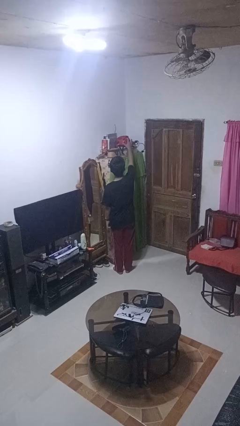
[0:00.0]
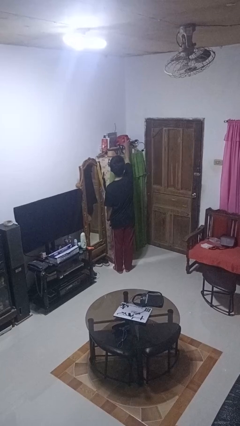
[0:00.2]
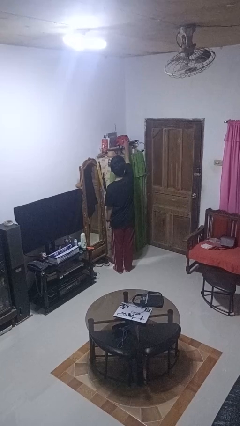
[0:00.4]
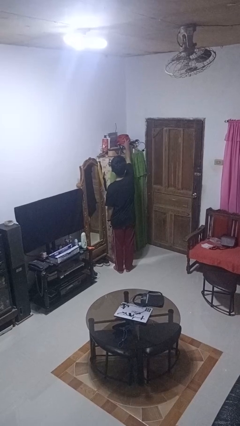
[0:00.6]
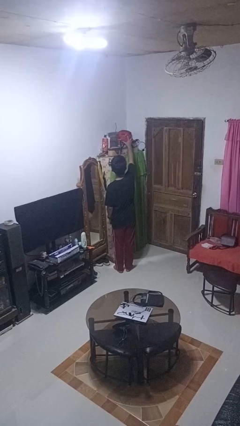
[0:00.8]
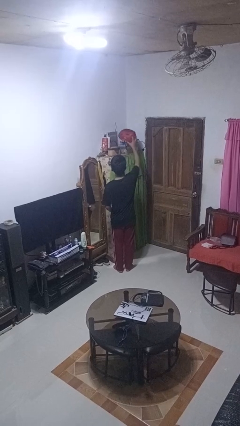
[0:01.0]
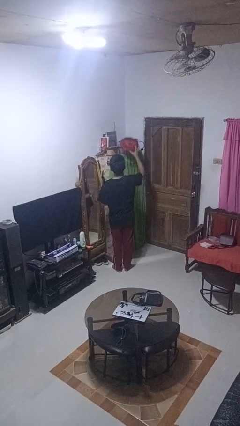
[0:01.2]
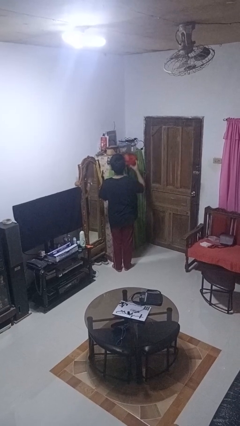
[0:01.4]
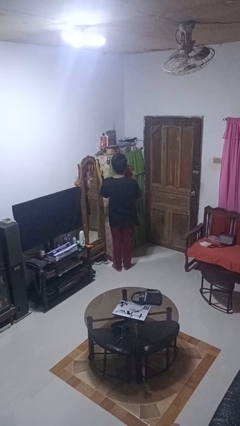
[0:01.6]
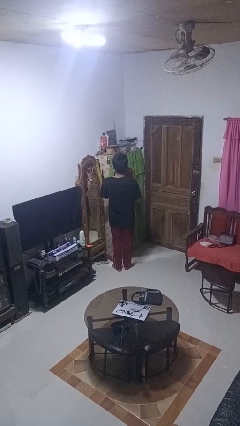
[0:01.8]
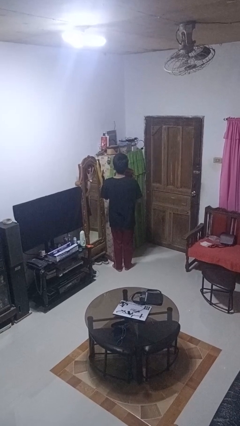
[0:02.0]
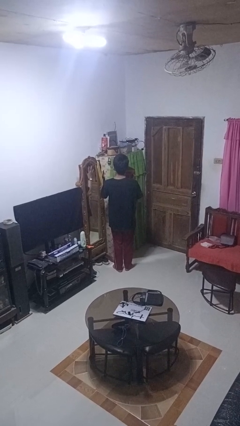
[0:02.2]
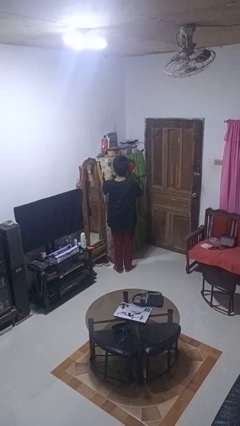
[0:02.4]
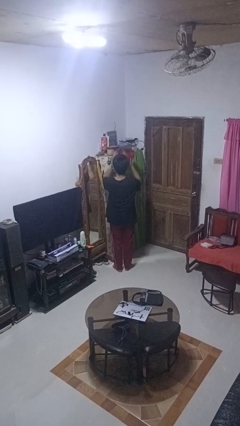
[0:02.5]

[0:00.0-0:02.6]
person picks up object from shelf

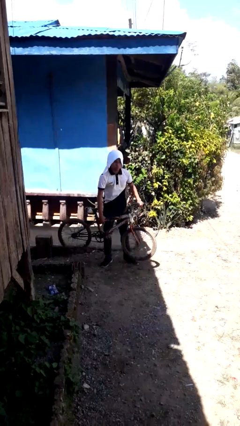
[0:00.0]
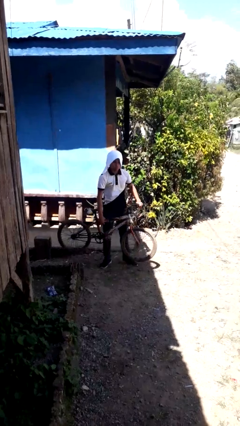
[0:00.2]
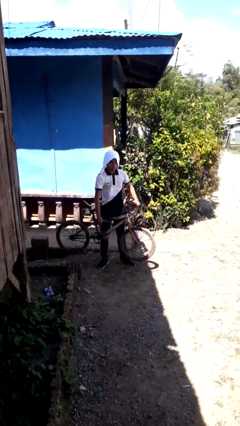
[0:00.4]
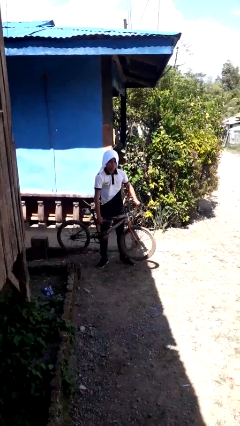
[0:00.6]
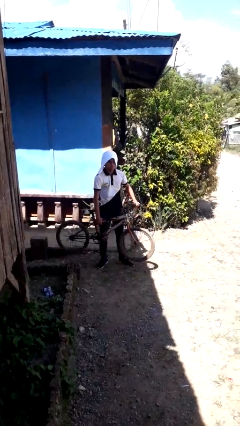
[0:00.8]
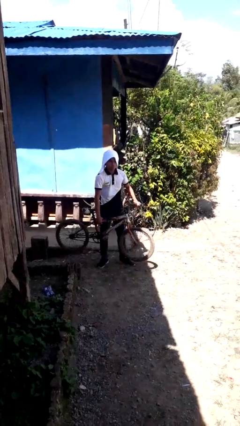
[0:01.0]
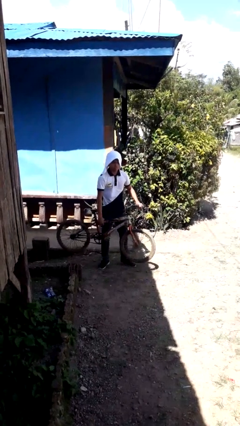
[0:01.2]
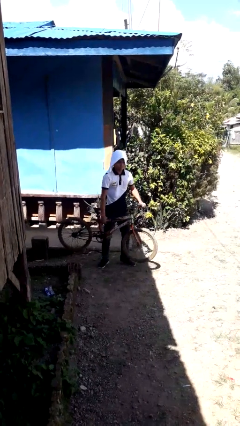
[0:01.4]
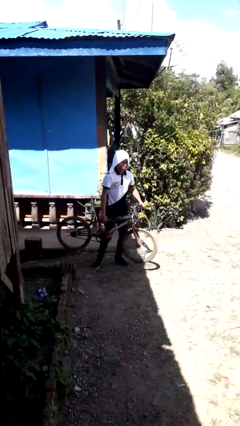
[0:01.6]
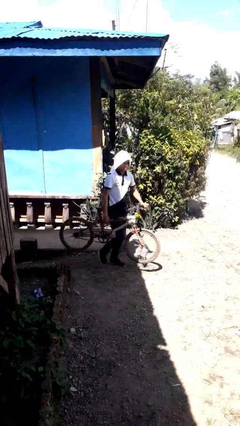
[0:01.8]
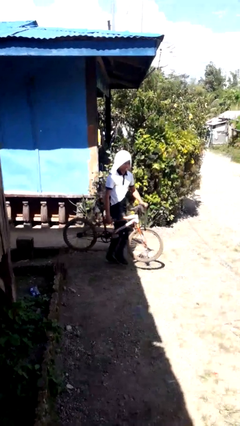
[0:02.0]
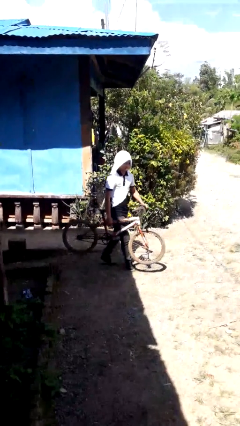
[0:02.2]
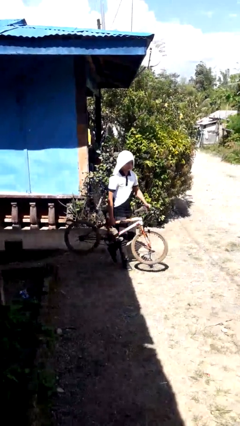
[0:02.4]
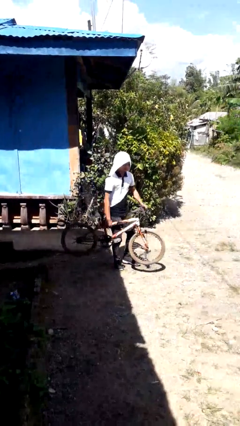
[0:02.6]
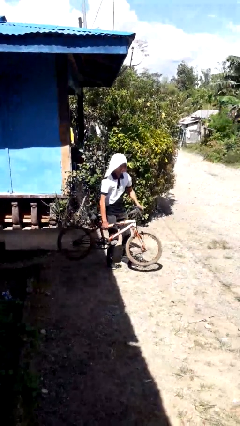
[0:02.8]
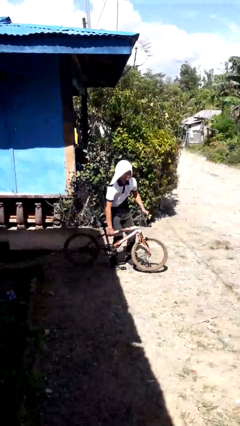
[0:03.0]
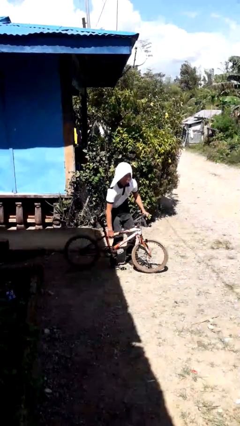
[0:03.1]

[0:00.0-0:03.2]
person carries bicycle

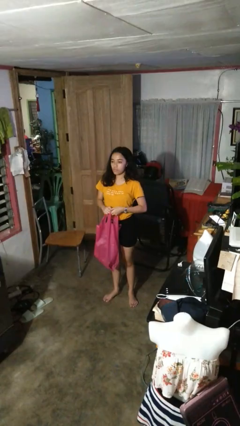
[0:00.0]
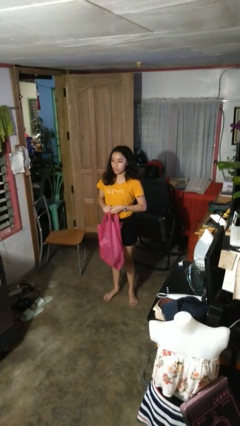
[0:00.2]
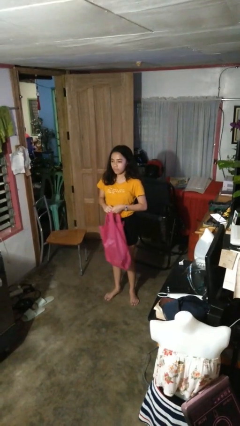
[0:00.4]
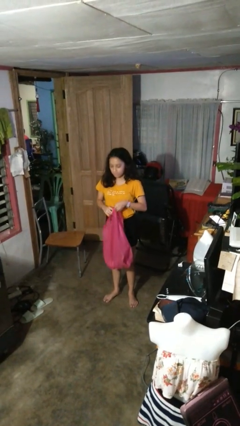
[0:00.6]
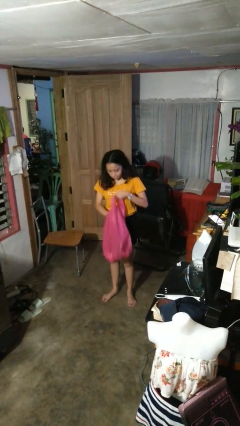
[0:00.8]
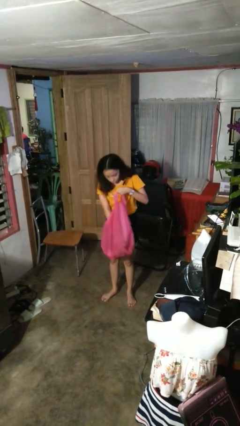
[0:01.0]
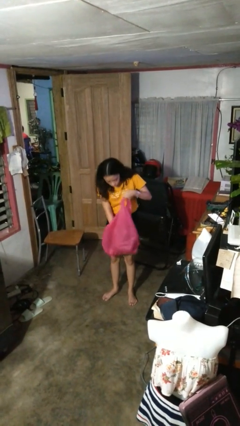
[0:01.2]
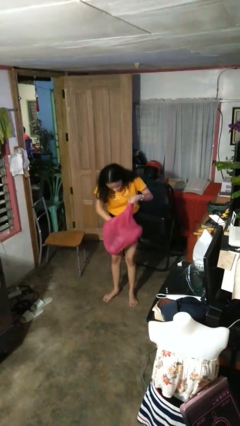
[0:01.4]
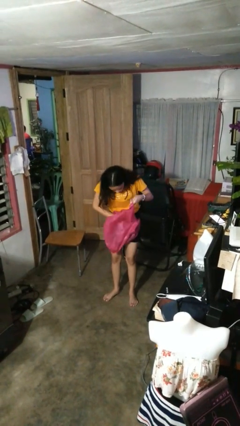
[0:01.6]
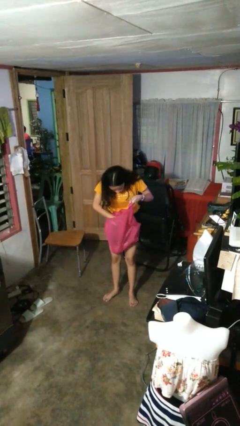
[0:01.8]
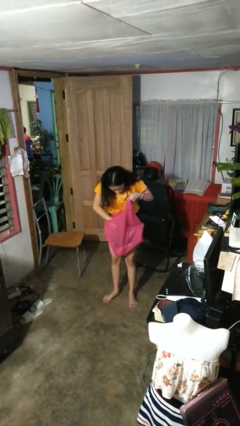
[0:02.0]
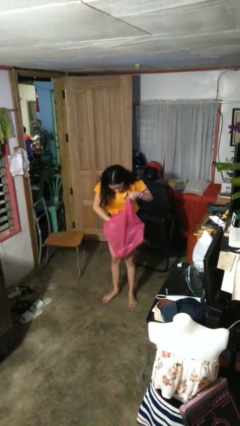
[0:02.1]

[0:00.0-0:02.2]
person searches in bag

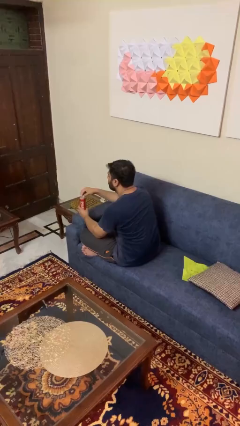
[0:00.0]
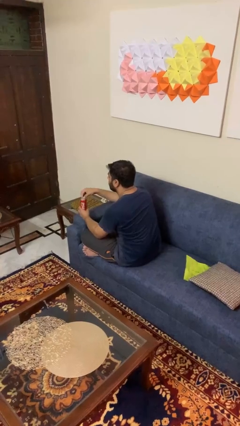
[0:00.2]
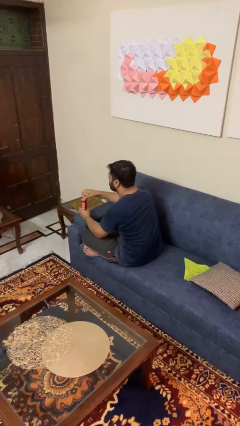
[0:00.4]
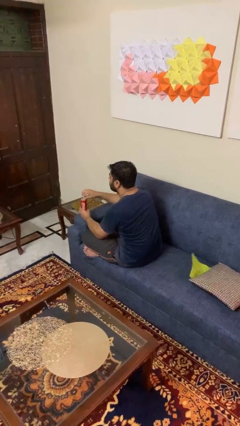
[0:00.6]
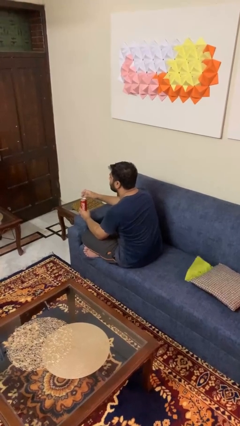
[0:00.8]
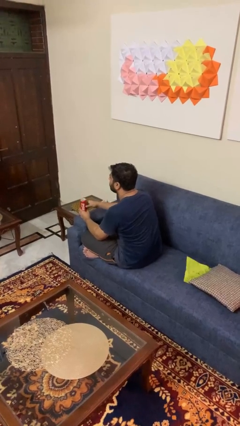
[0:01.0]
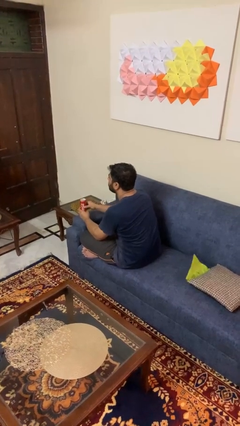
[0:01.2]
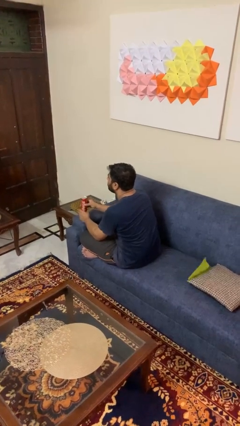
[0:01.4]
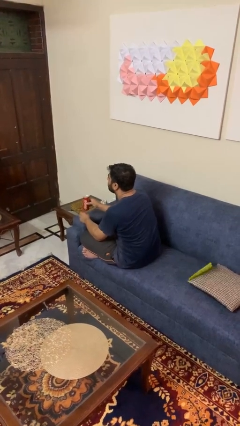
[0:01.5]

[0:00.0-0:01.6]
person opens beverage can

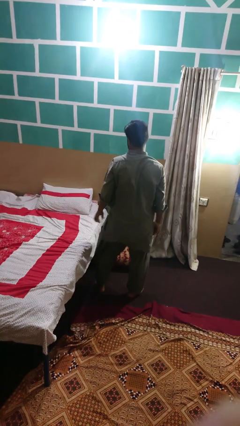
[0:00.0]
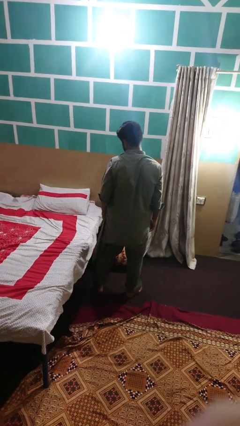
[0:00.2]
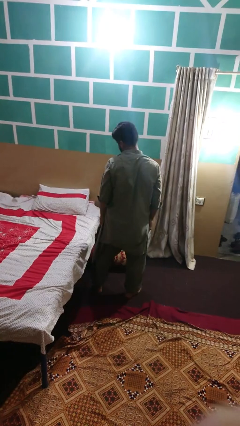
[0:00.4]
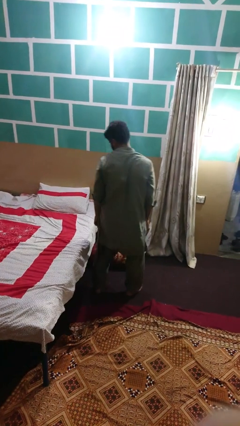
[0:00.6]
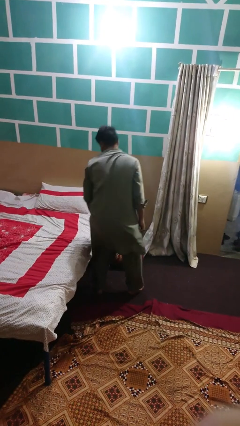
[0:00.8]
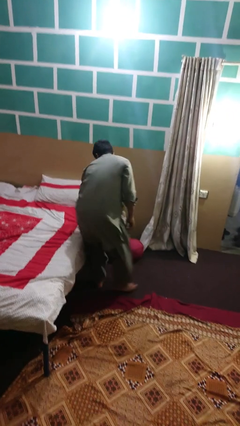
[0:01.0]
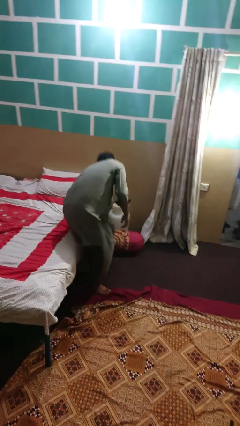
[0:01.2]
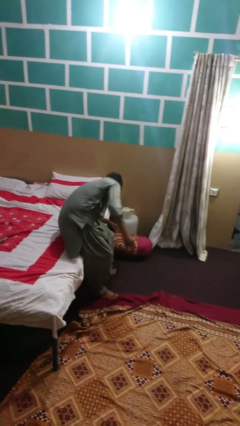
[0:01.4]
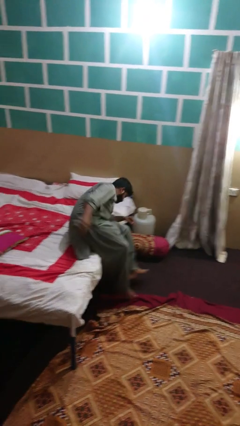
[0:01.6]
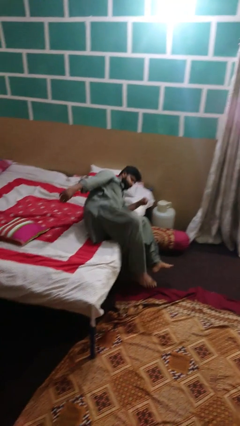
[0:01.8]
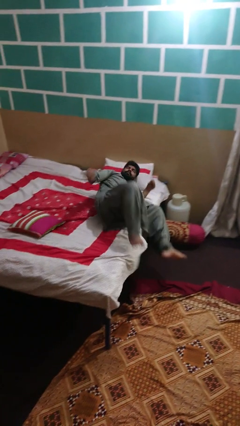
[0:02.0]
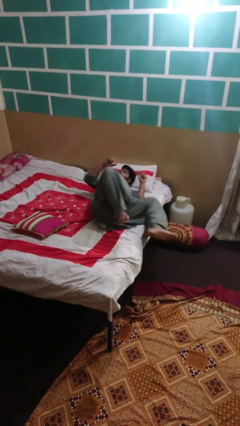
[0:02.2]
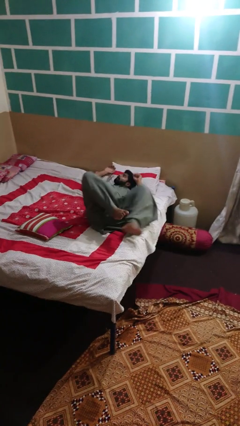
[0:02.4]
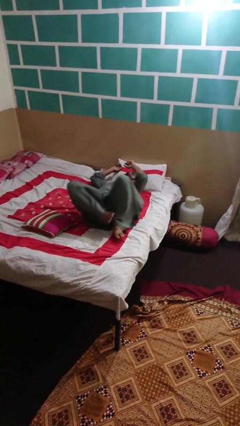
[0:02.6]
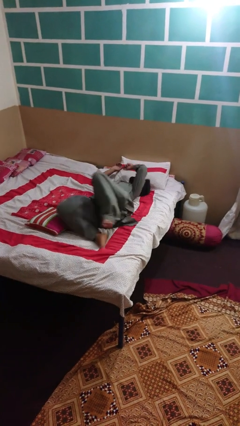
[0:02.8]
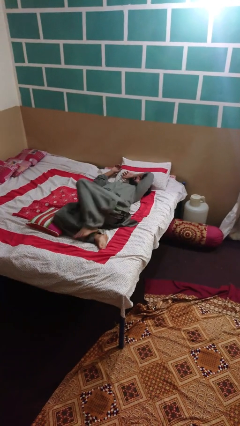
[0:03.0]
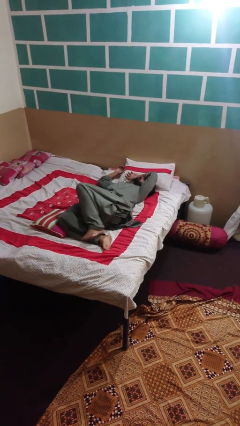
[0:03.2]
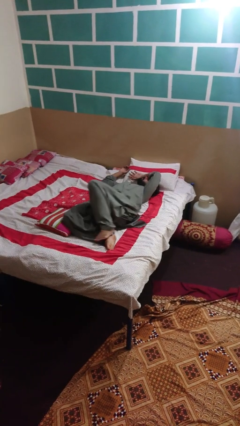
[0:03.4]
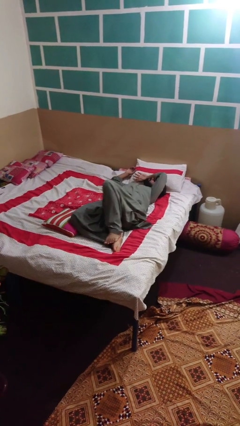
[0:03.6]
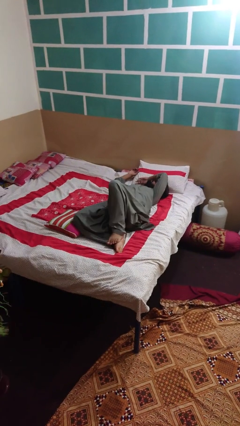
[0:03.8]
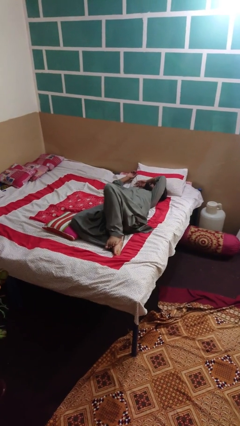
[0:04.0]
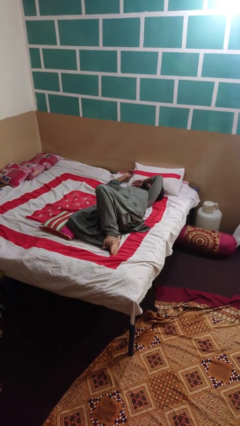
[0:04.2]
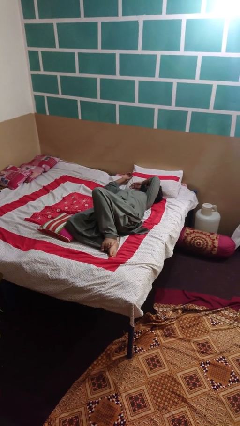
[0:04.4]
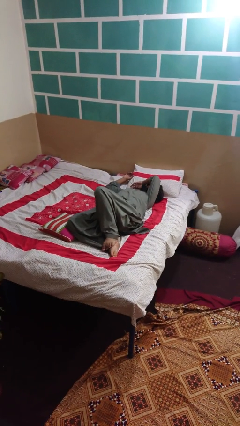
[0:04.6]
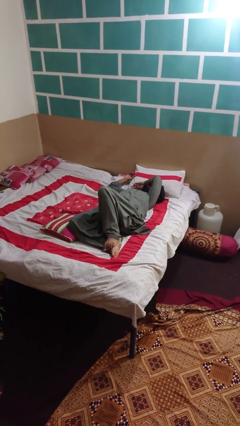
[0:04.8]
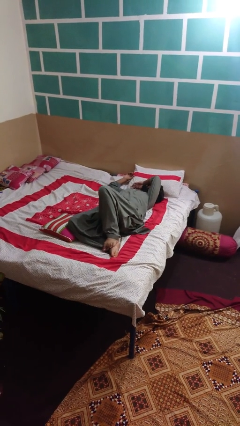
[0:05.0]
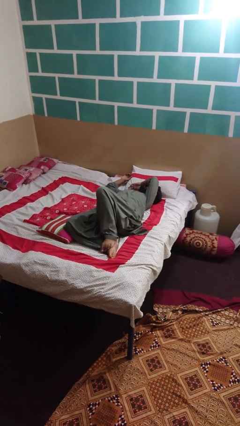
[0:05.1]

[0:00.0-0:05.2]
person lies down on bed

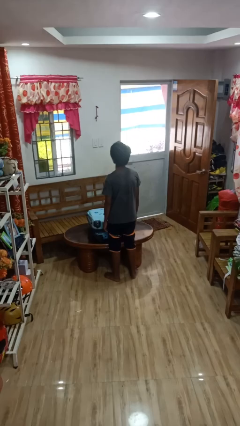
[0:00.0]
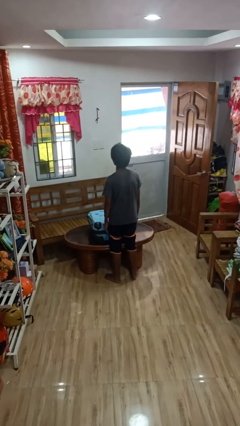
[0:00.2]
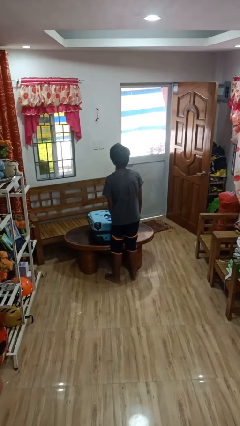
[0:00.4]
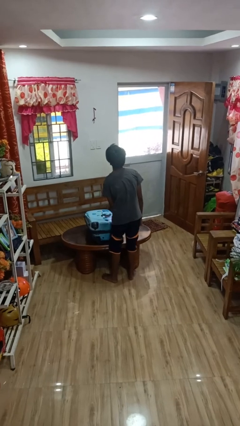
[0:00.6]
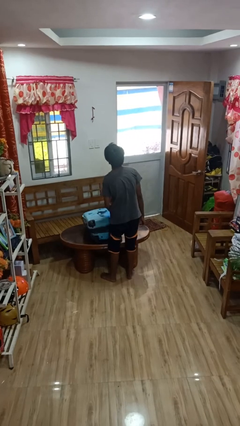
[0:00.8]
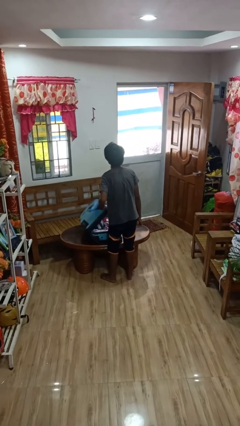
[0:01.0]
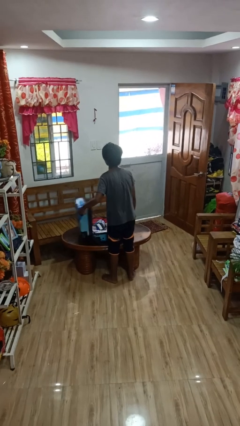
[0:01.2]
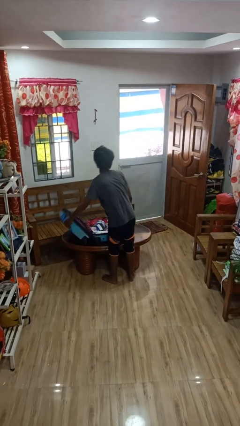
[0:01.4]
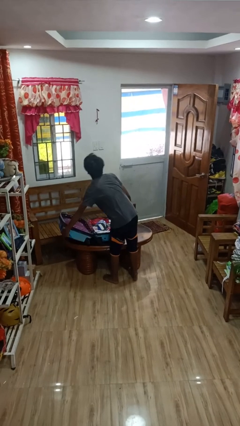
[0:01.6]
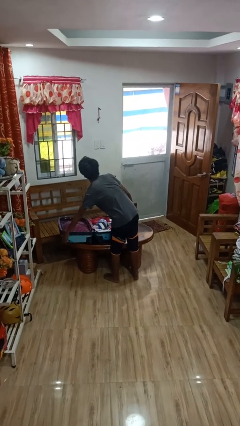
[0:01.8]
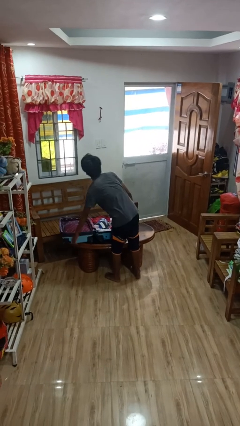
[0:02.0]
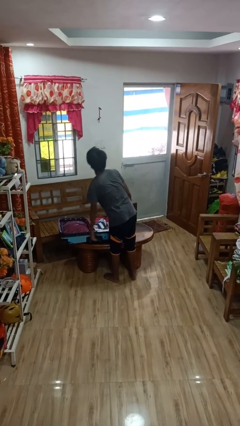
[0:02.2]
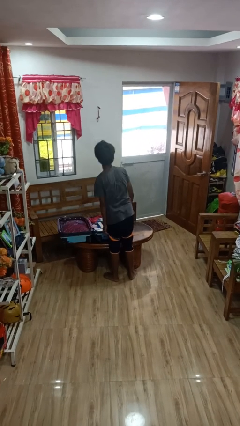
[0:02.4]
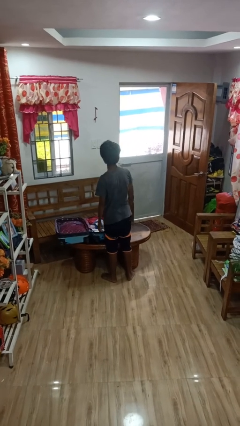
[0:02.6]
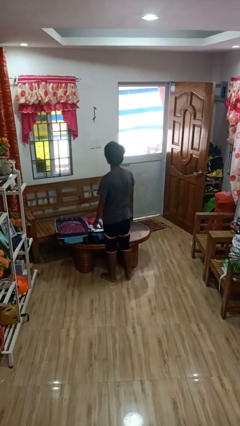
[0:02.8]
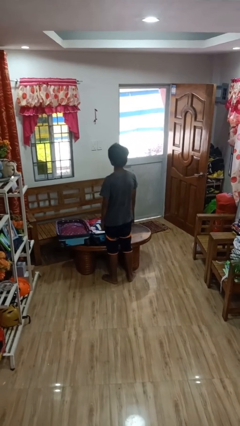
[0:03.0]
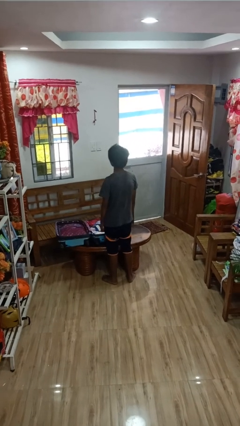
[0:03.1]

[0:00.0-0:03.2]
person opens suitcase
